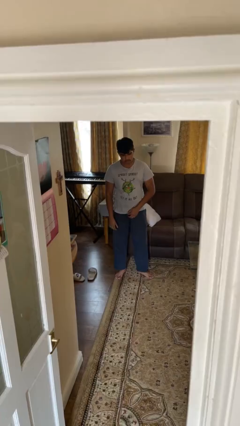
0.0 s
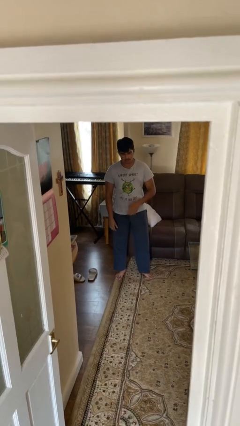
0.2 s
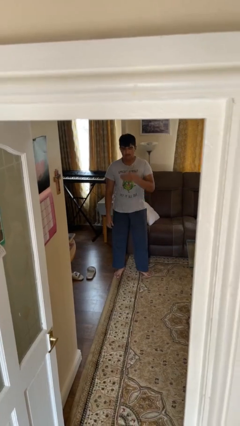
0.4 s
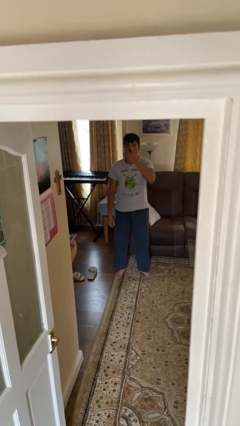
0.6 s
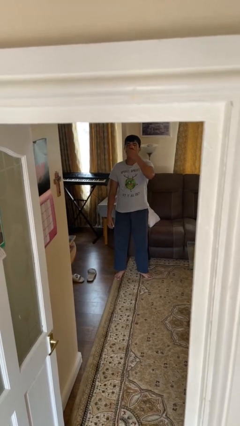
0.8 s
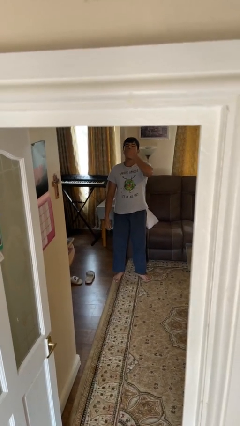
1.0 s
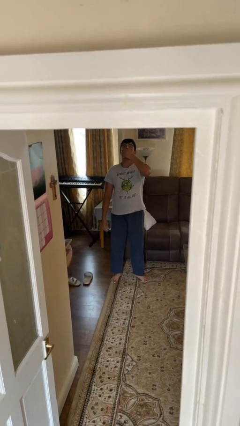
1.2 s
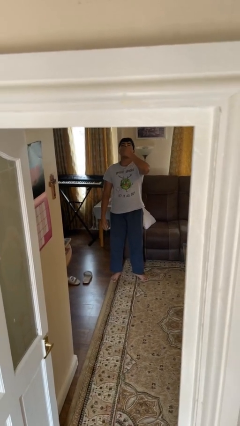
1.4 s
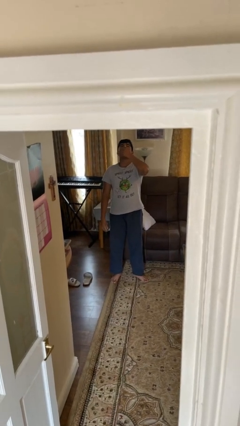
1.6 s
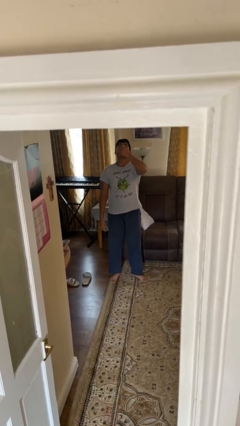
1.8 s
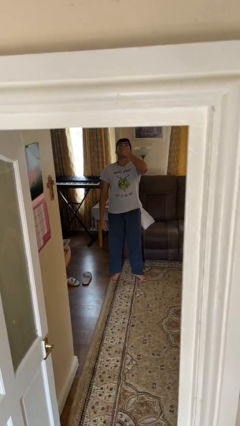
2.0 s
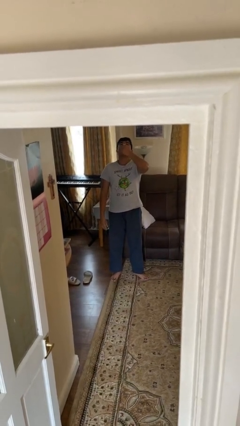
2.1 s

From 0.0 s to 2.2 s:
person yawns

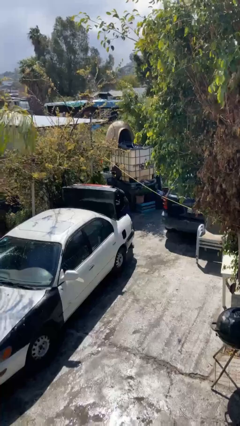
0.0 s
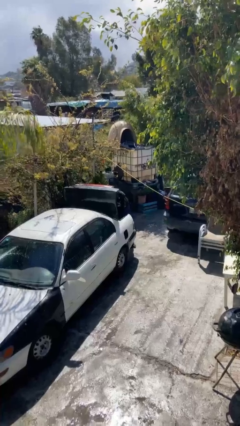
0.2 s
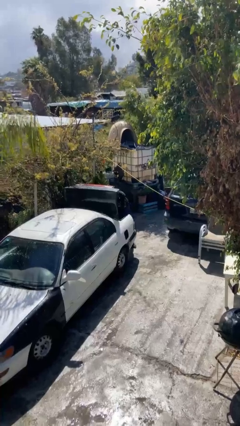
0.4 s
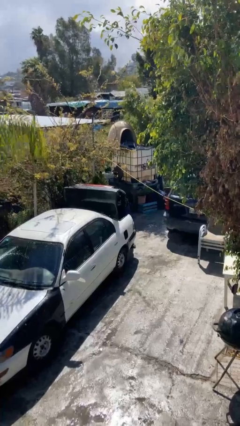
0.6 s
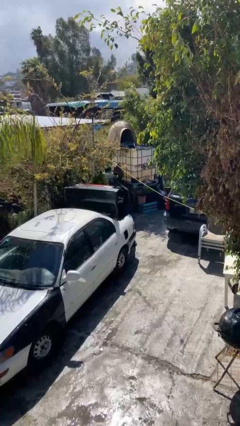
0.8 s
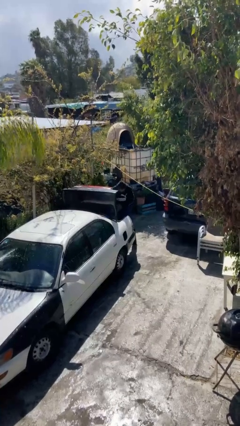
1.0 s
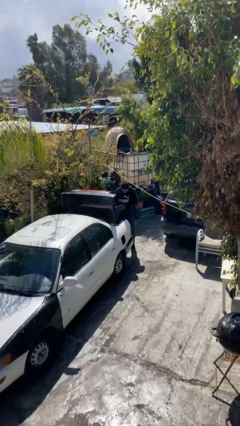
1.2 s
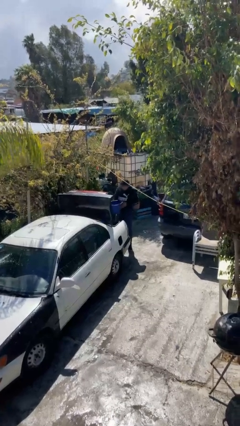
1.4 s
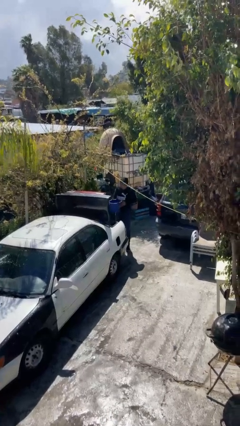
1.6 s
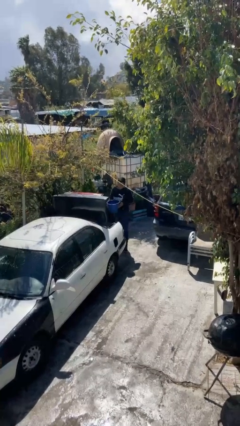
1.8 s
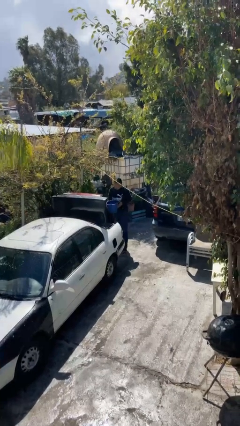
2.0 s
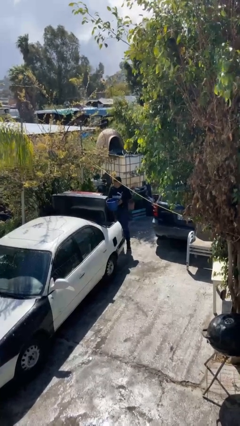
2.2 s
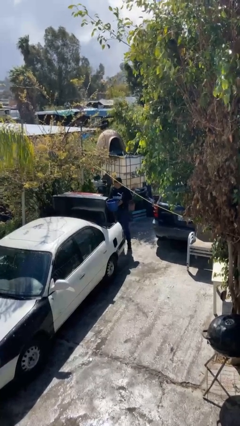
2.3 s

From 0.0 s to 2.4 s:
person unloads car

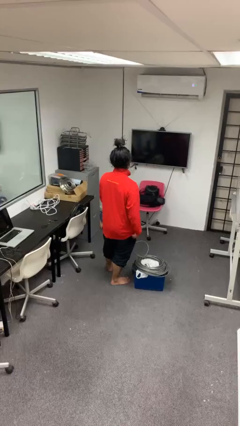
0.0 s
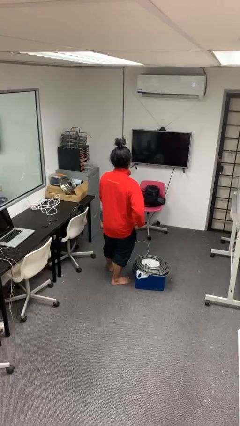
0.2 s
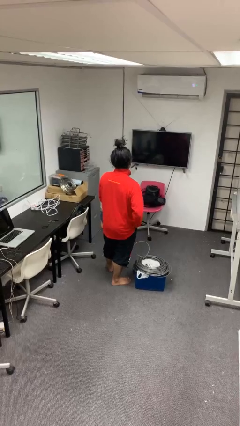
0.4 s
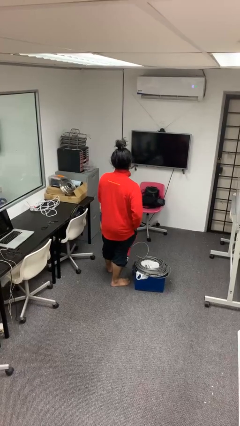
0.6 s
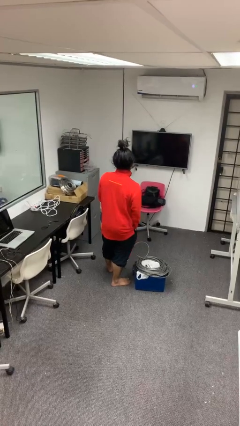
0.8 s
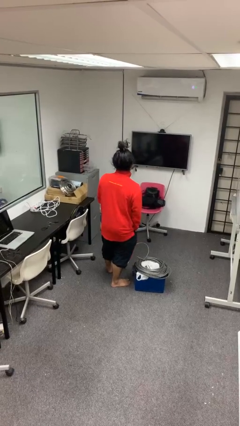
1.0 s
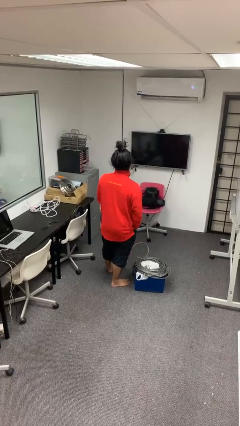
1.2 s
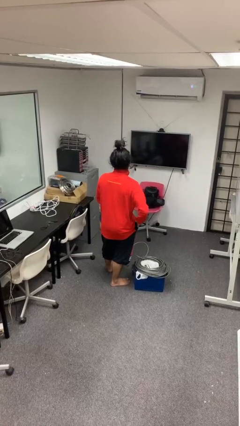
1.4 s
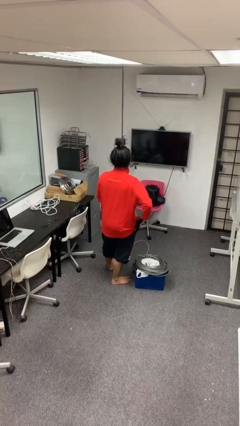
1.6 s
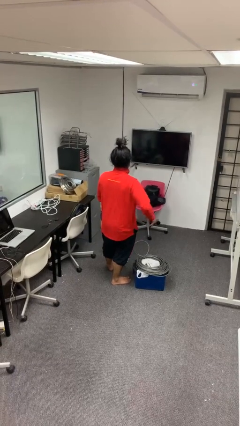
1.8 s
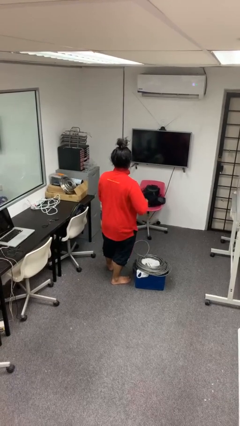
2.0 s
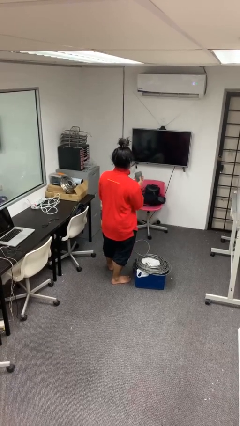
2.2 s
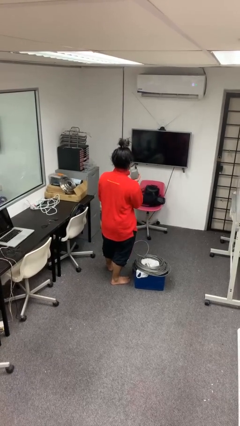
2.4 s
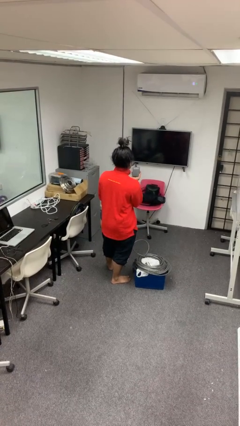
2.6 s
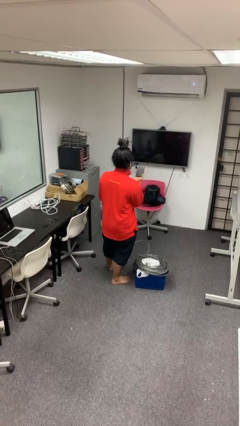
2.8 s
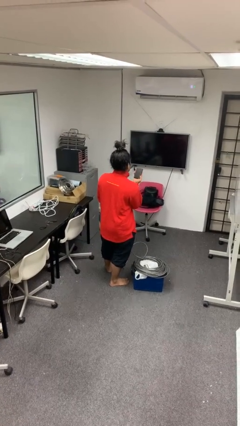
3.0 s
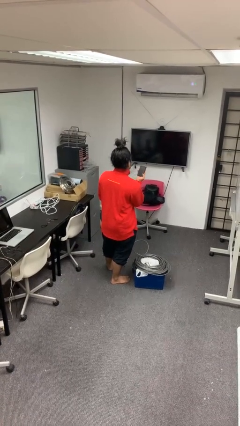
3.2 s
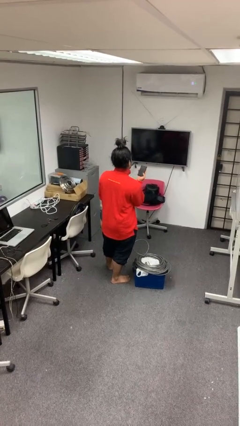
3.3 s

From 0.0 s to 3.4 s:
person takes phone from pocket

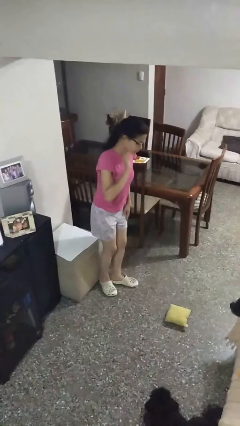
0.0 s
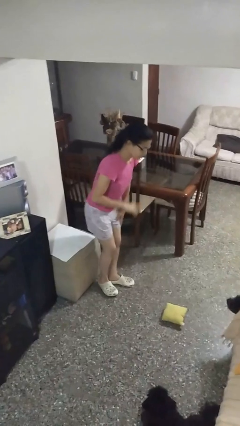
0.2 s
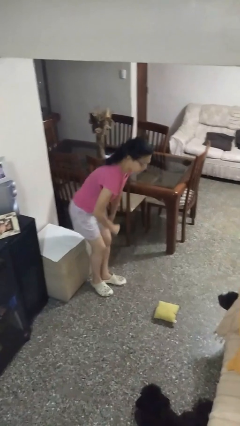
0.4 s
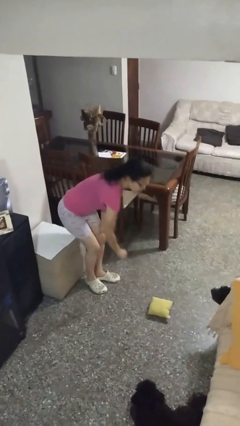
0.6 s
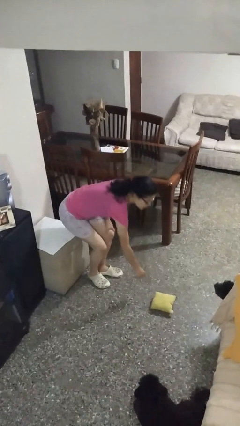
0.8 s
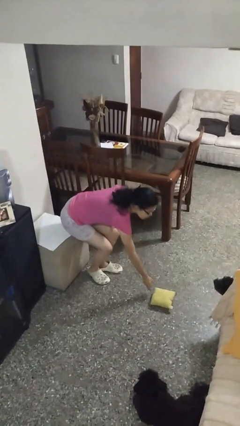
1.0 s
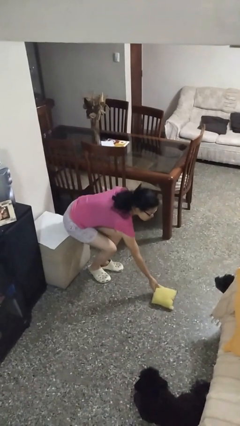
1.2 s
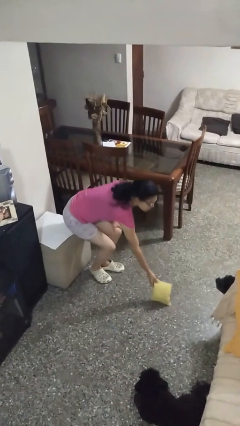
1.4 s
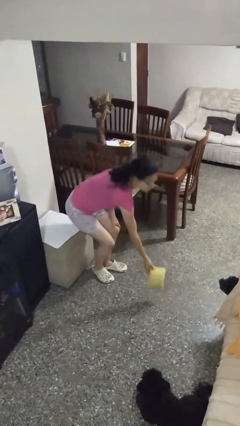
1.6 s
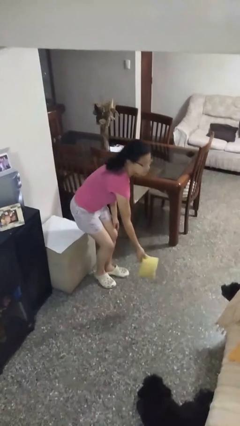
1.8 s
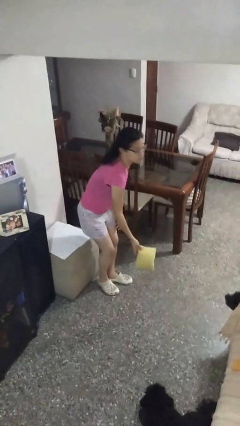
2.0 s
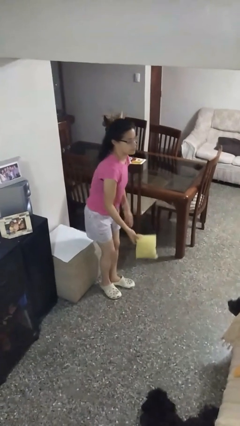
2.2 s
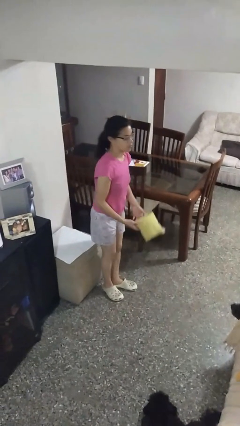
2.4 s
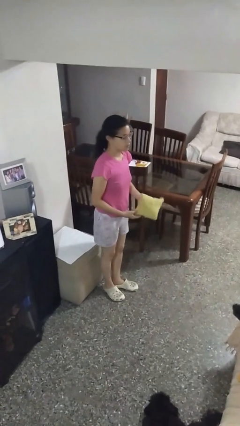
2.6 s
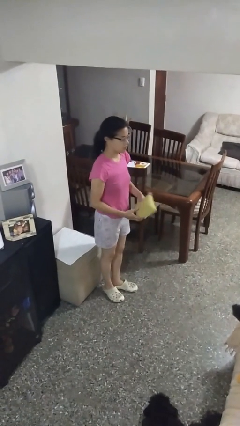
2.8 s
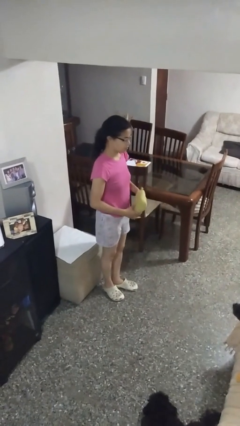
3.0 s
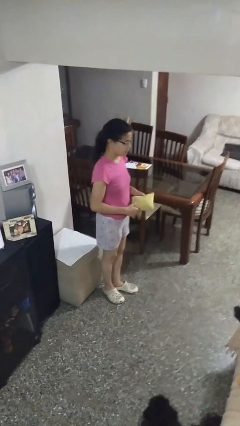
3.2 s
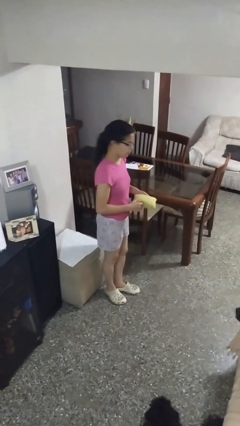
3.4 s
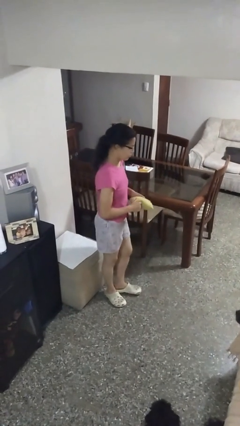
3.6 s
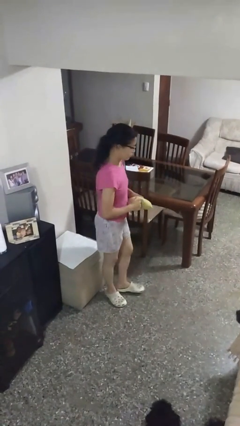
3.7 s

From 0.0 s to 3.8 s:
person picks up object from floor

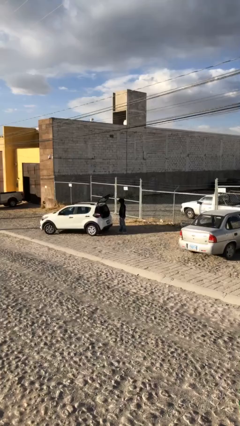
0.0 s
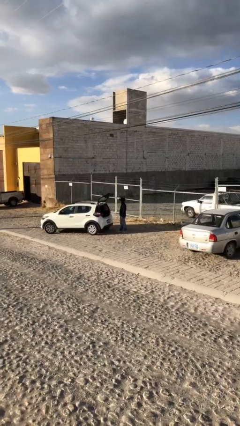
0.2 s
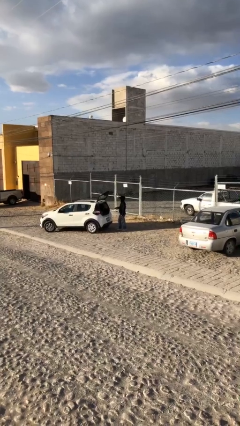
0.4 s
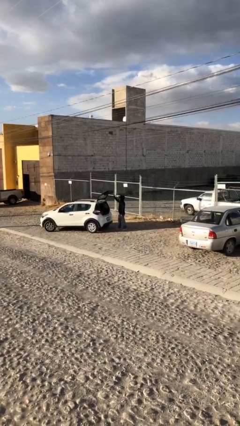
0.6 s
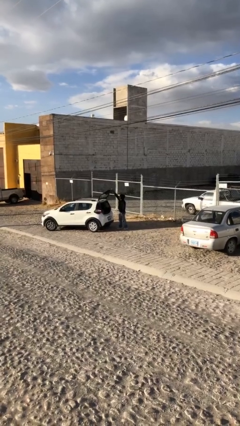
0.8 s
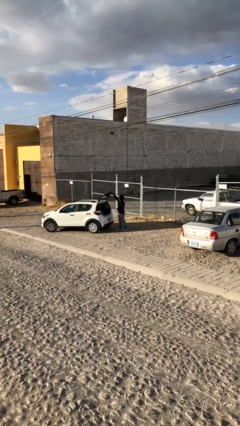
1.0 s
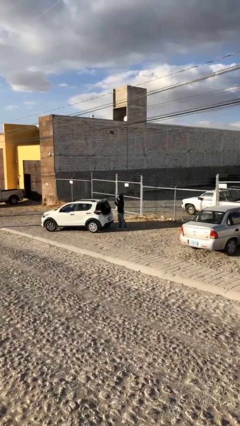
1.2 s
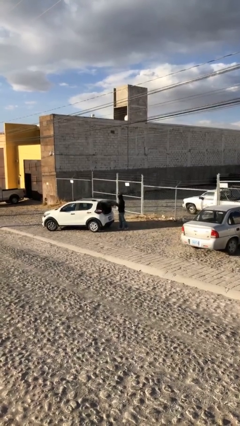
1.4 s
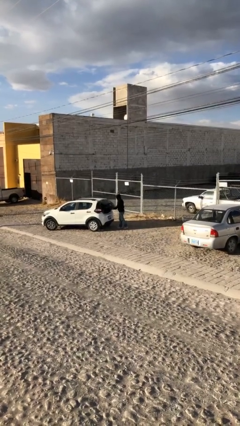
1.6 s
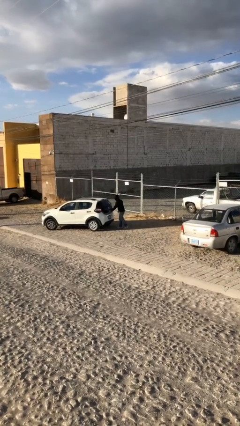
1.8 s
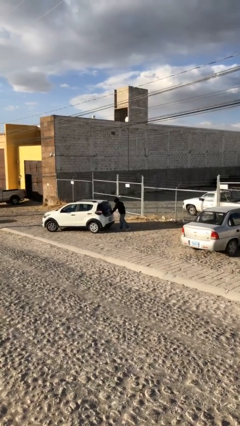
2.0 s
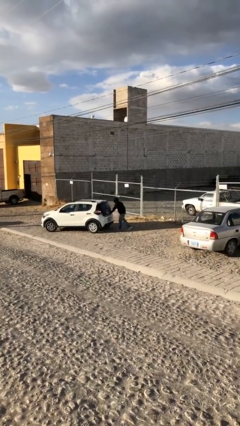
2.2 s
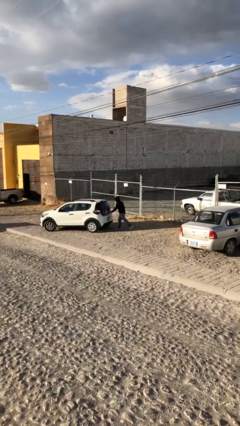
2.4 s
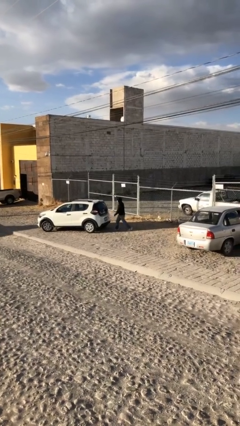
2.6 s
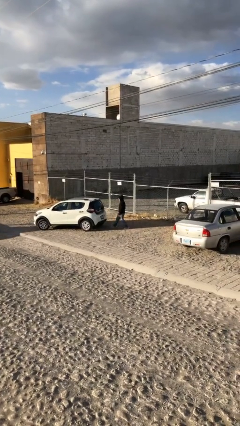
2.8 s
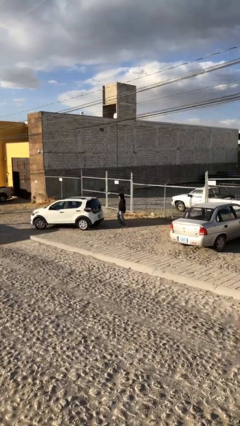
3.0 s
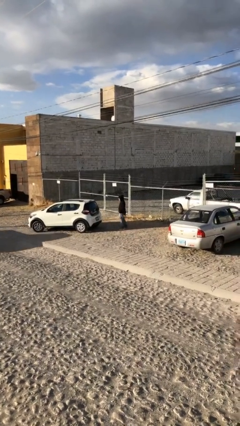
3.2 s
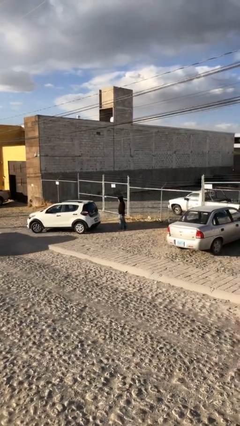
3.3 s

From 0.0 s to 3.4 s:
person closes car trunk

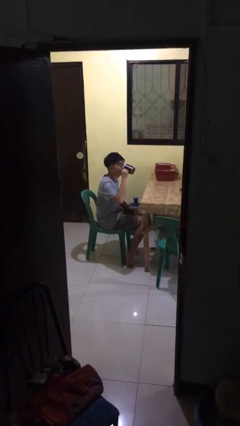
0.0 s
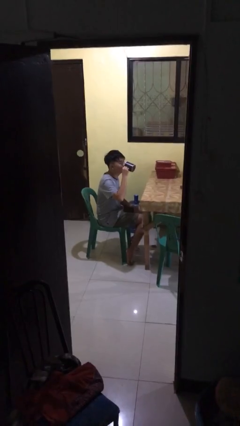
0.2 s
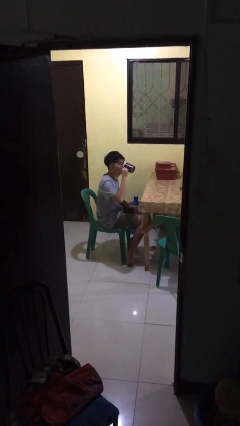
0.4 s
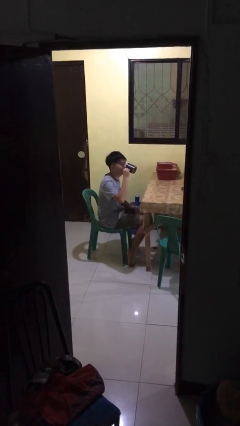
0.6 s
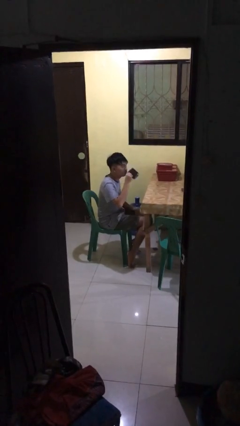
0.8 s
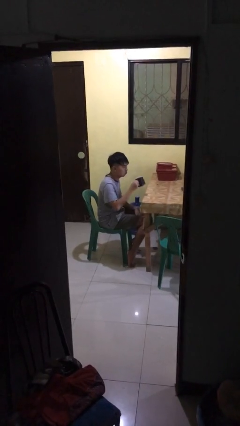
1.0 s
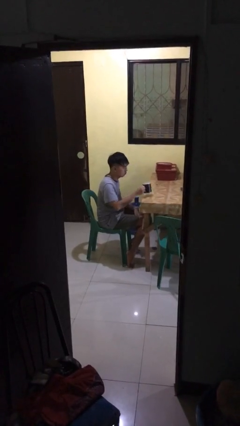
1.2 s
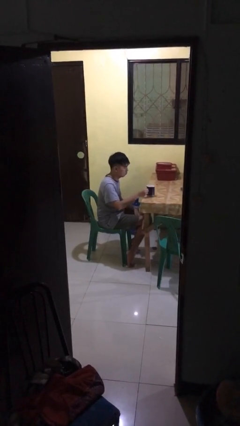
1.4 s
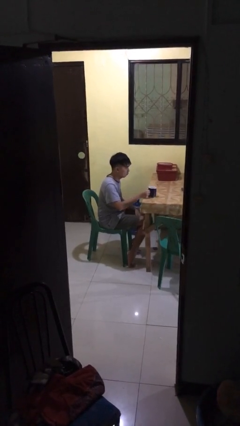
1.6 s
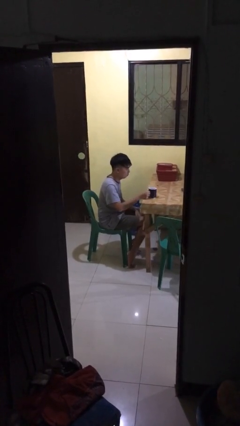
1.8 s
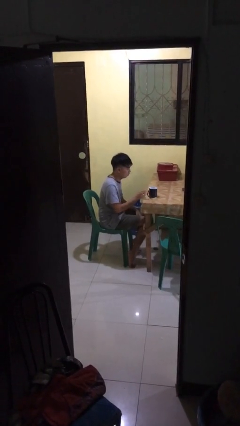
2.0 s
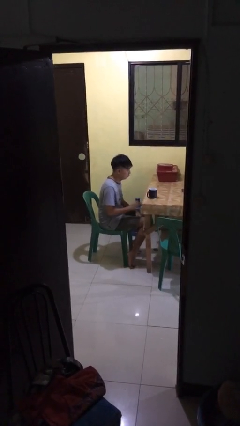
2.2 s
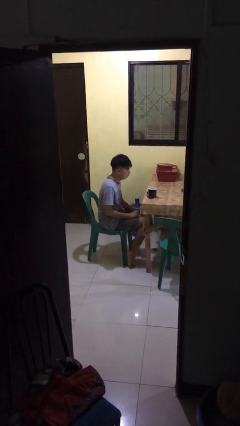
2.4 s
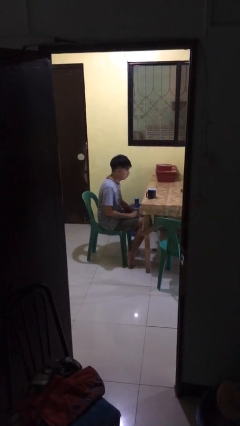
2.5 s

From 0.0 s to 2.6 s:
person puts down object on table
